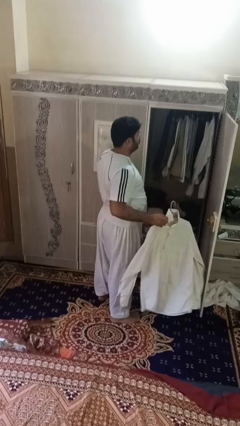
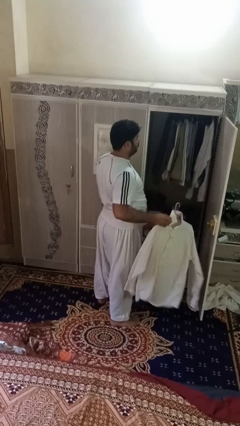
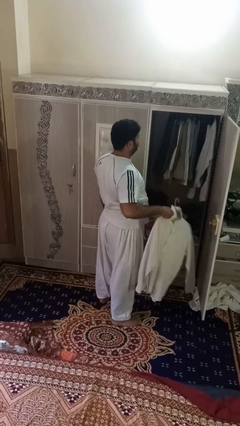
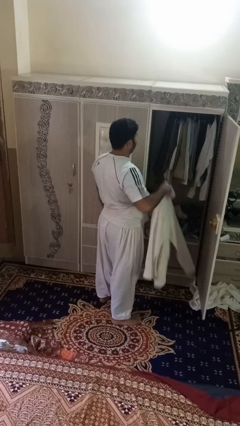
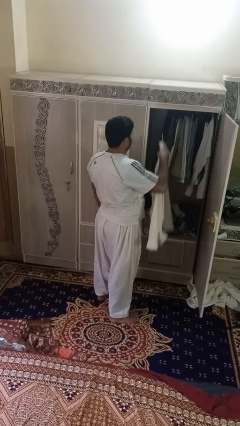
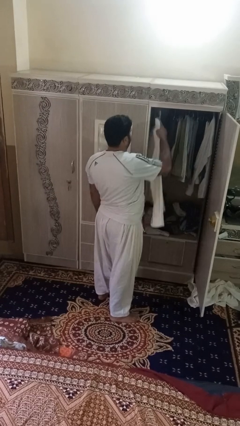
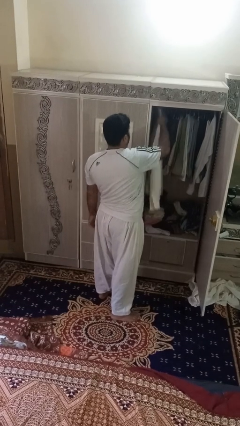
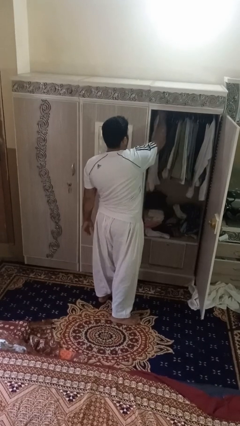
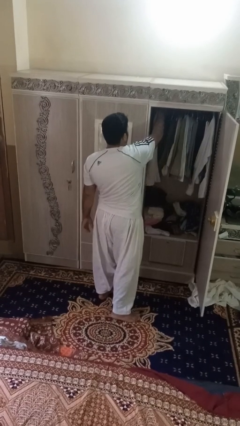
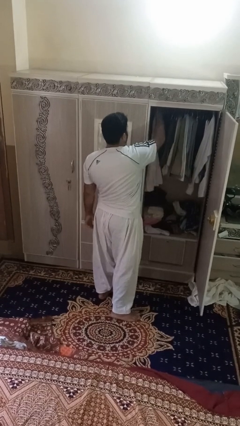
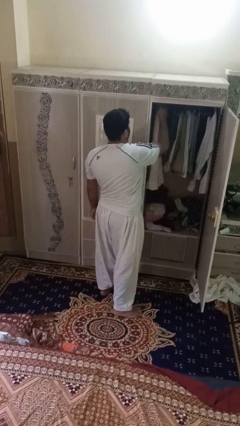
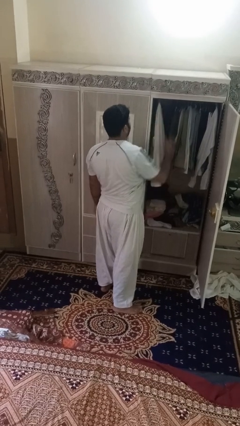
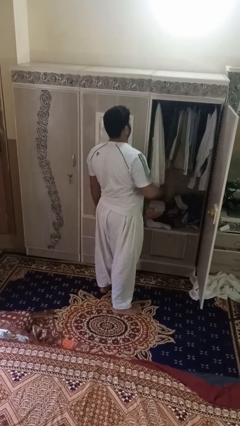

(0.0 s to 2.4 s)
person puts clothes into closet

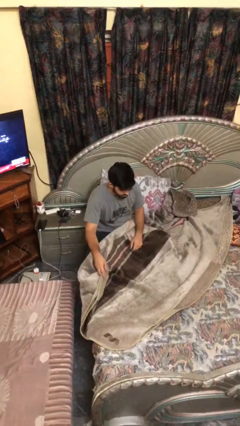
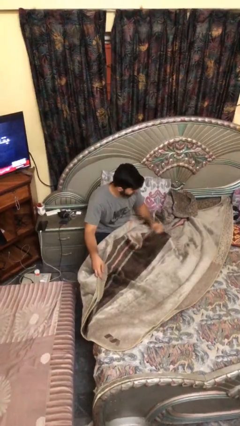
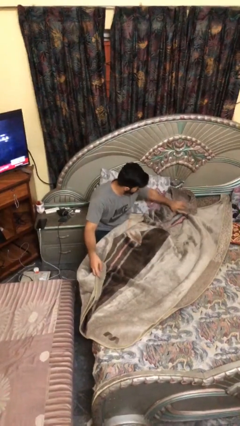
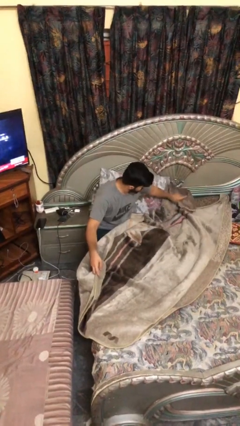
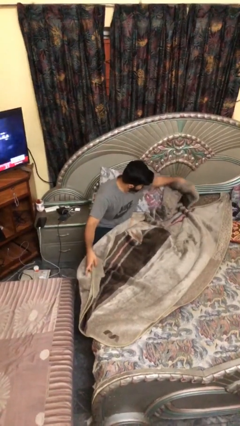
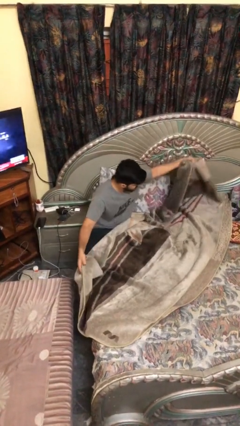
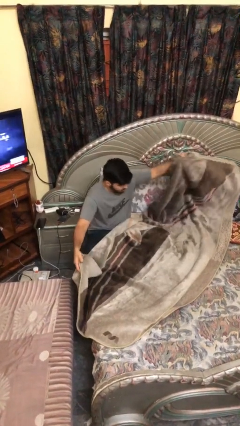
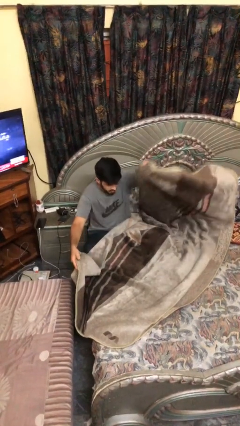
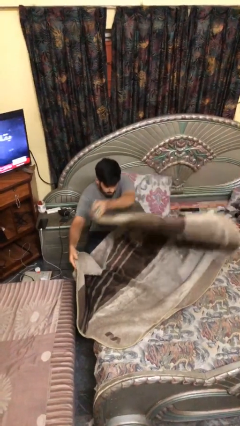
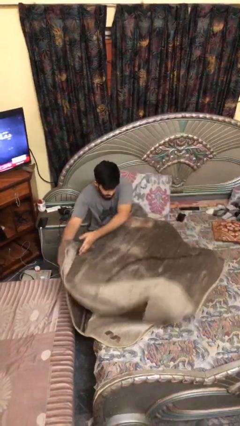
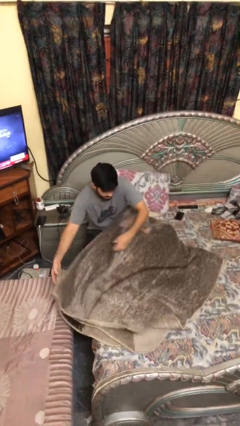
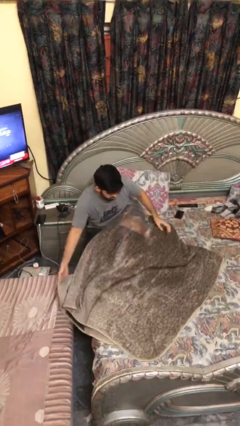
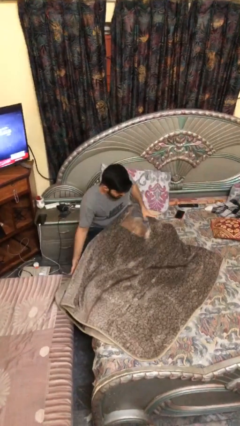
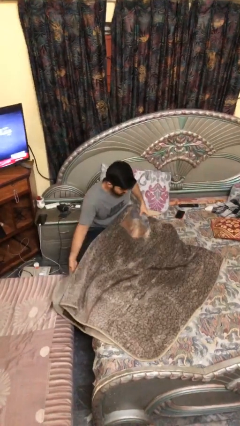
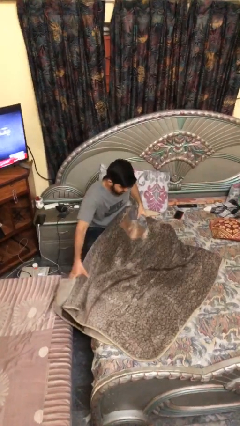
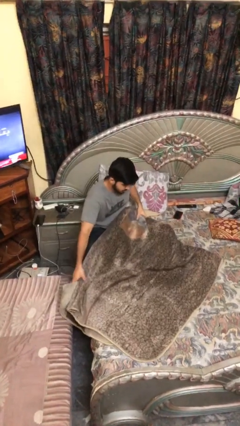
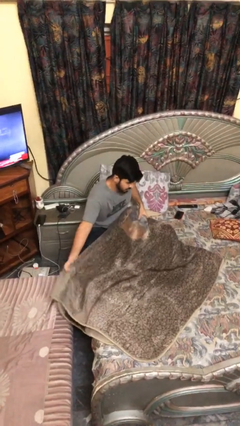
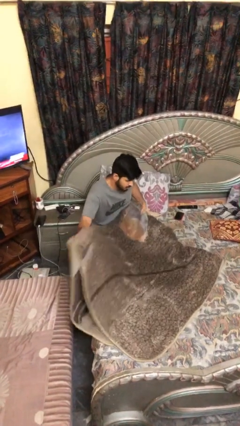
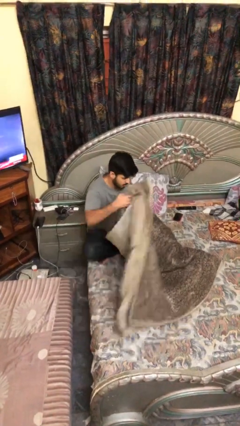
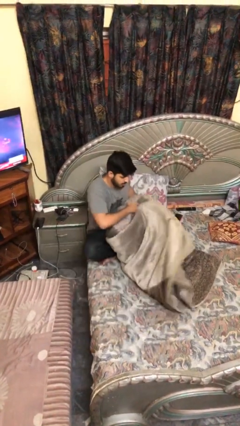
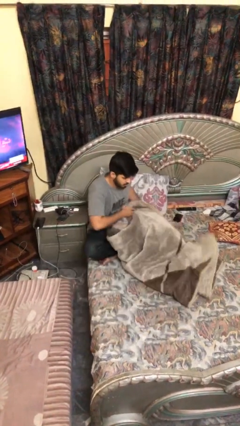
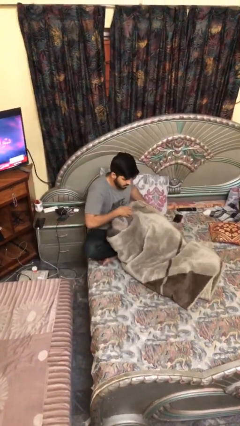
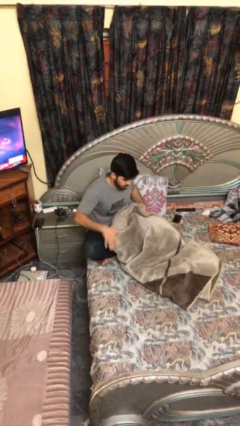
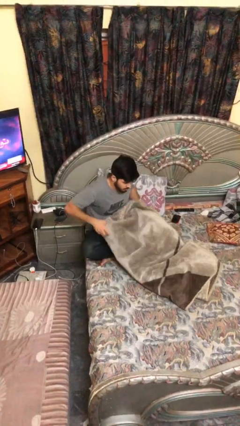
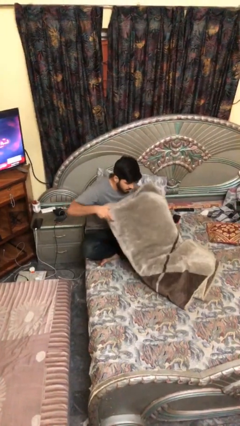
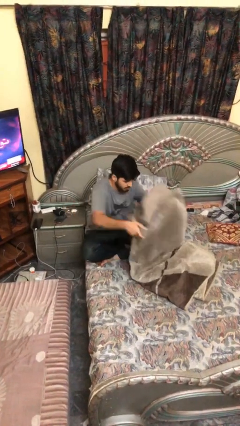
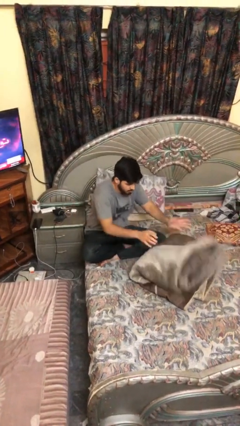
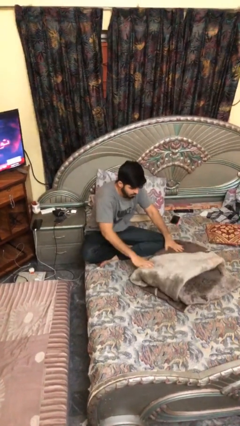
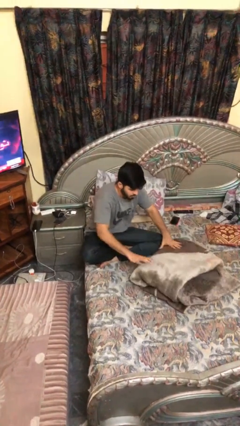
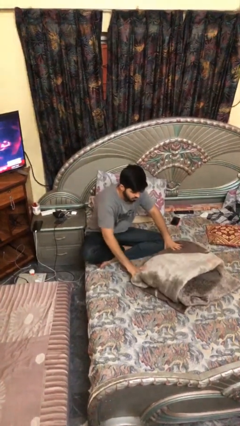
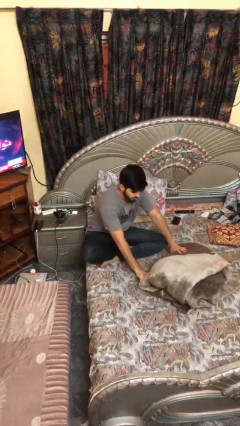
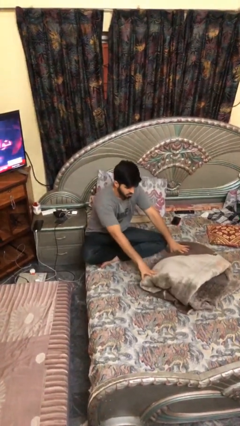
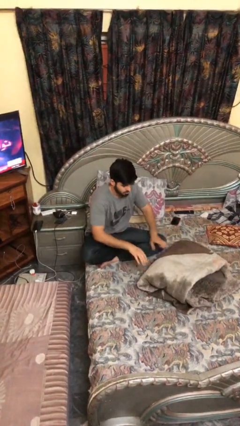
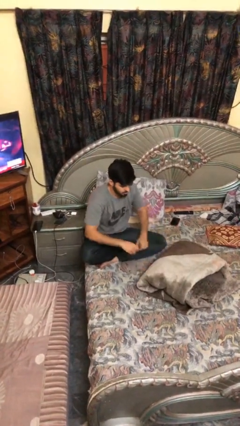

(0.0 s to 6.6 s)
person folds blanket

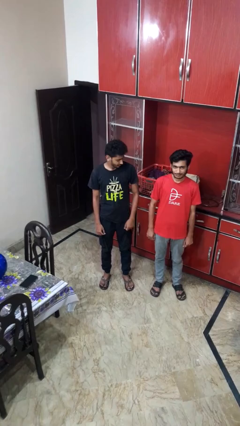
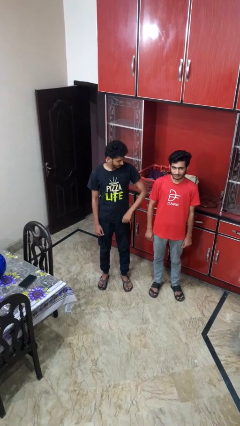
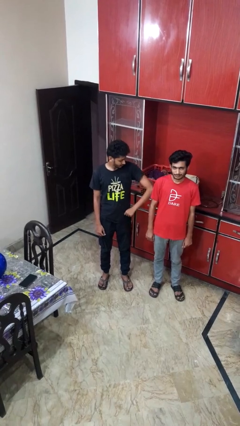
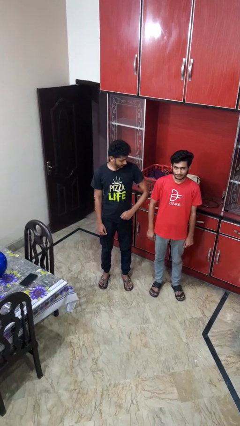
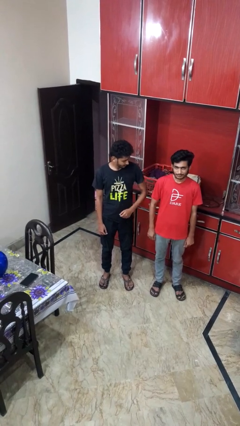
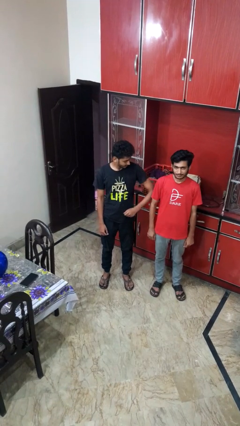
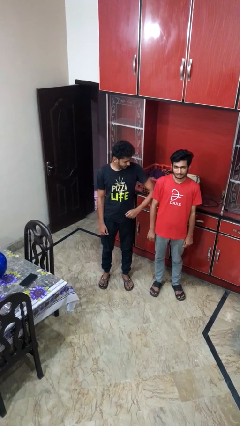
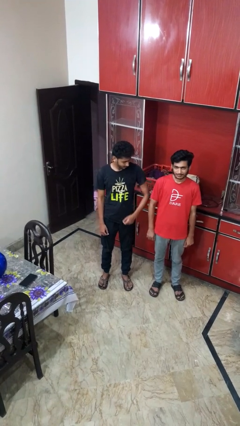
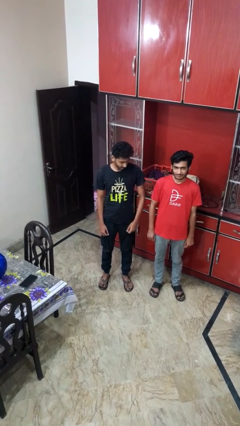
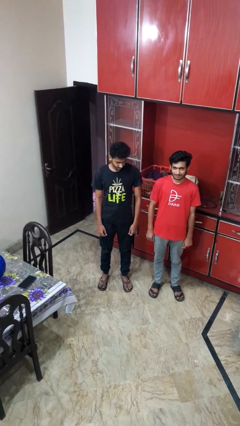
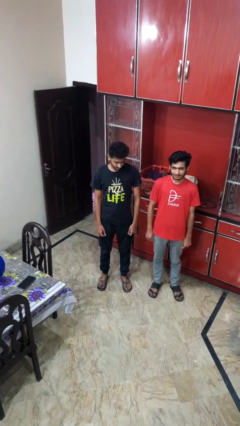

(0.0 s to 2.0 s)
person nudges person with elbow

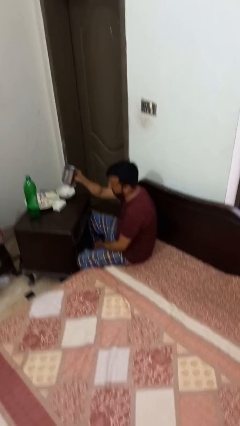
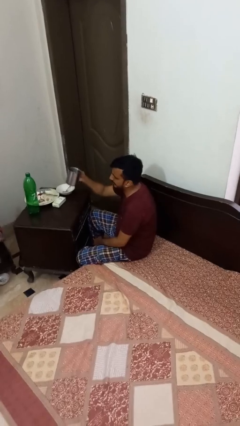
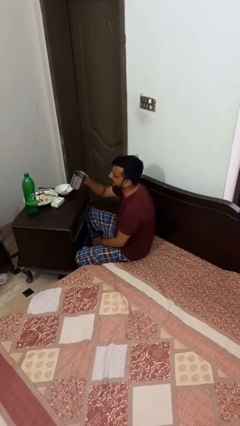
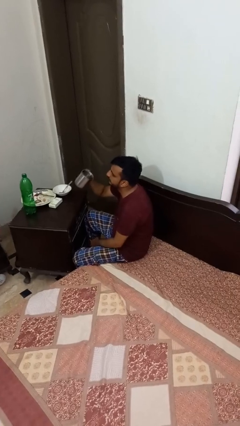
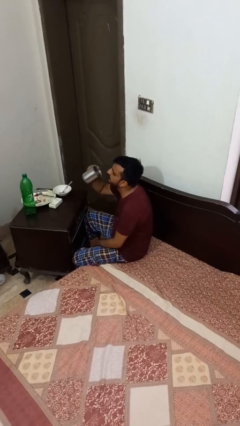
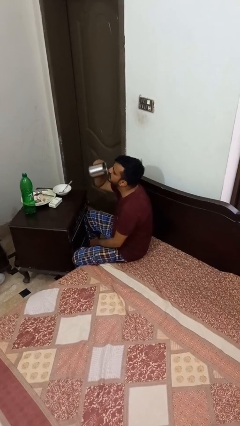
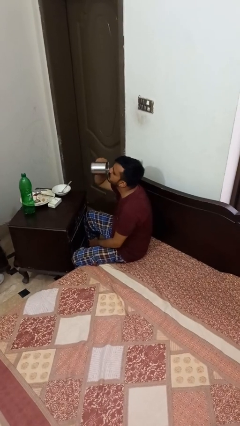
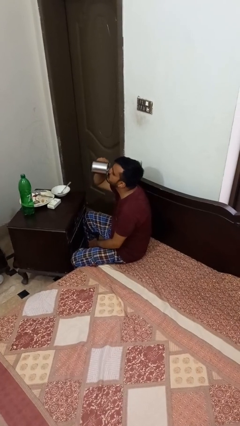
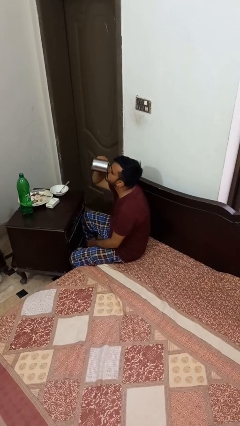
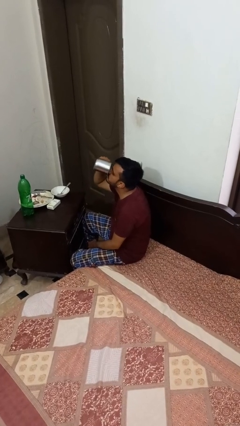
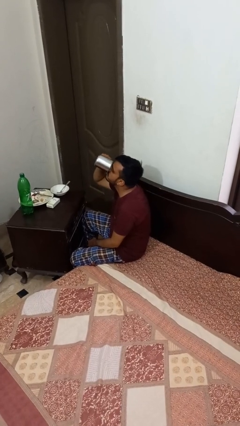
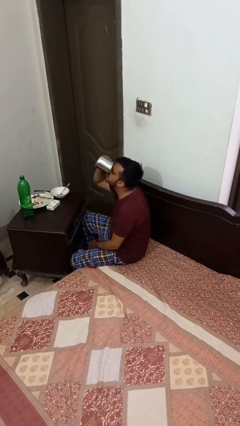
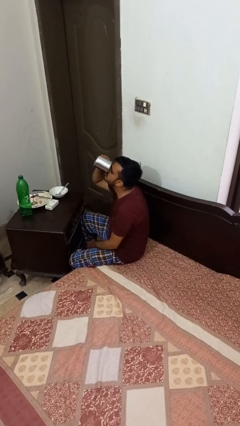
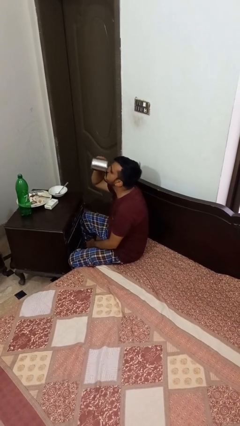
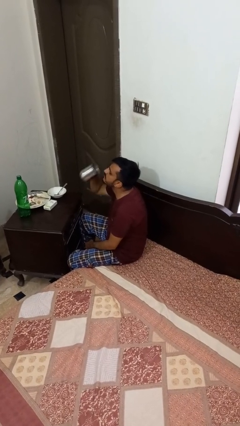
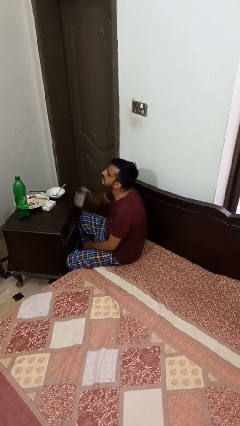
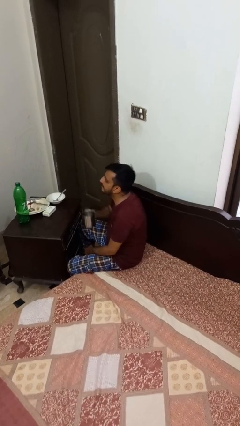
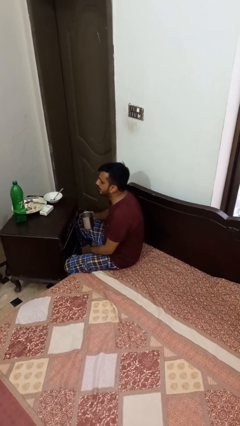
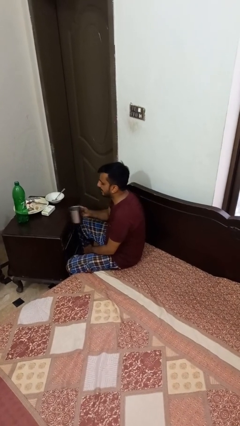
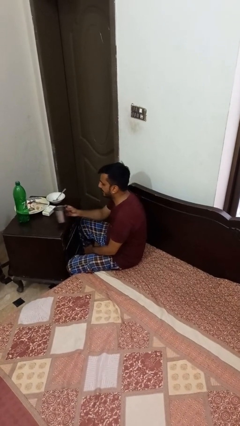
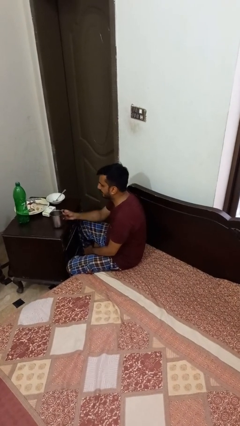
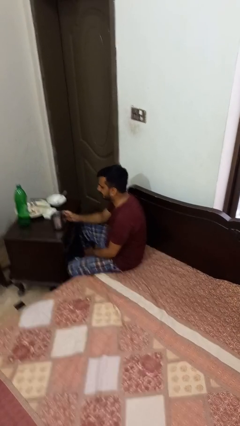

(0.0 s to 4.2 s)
person drinks from shotglass

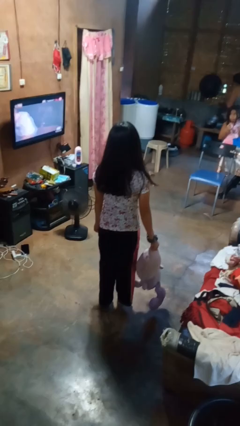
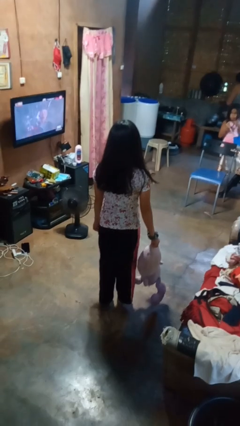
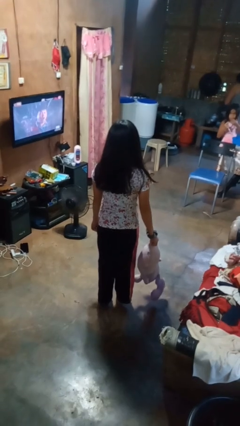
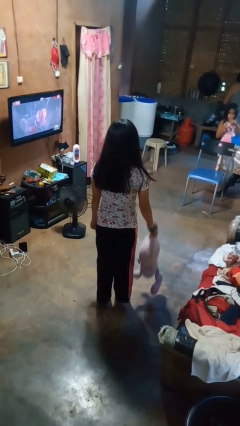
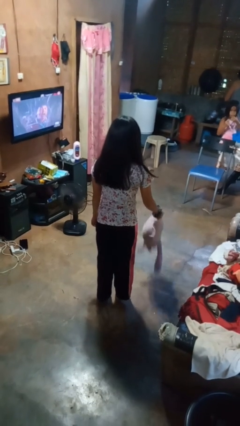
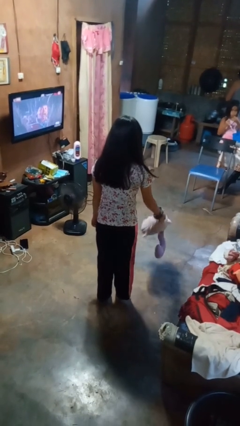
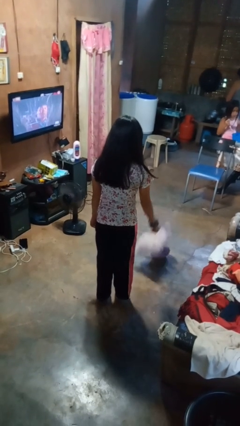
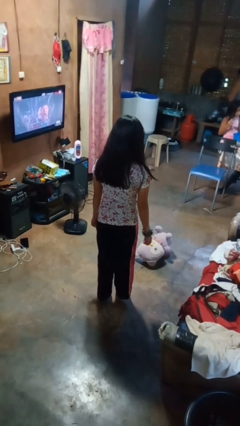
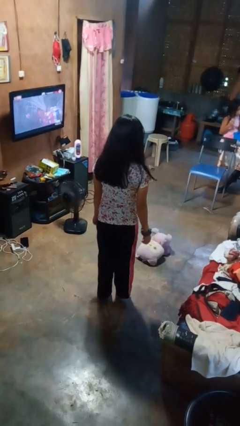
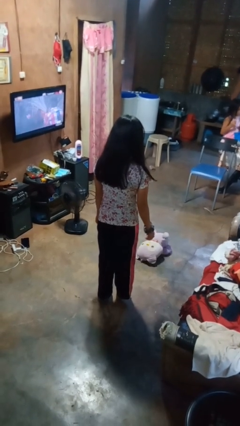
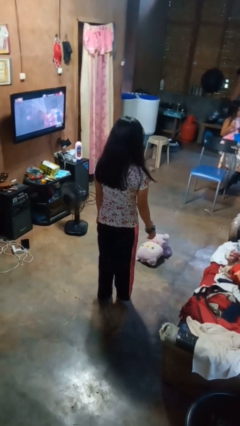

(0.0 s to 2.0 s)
person throws object to ground

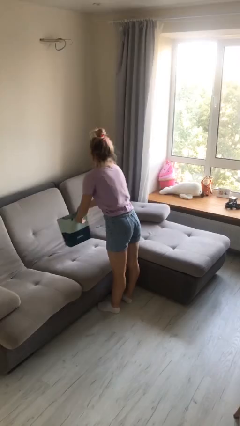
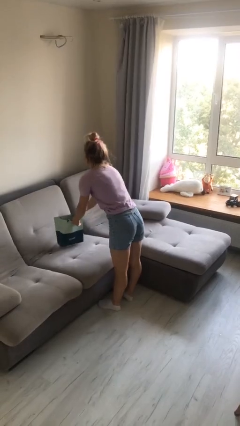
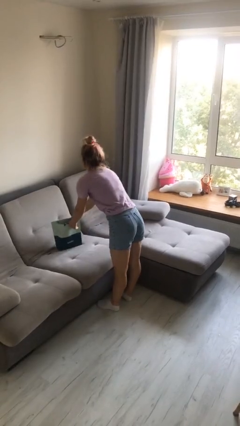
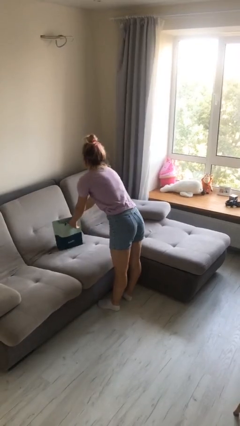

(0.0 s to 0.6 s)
person puts down object on couch
